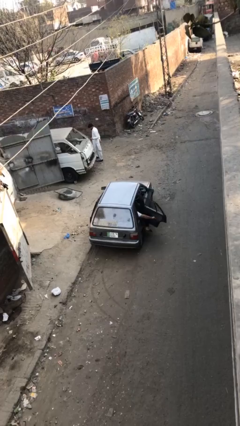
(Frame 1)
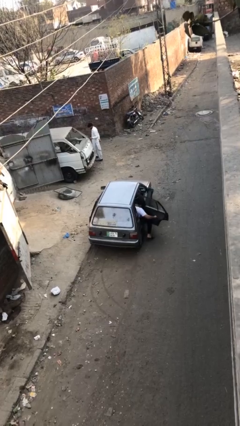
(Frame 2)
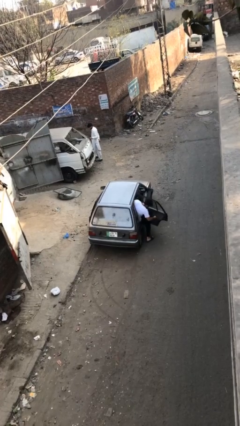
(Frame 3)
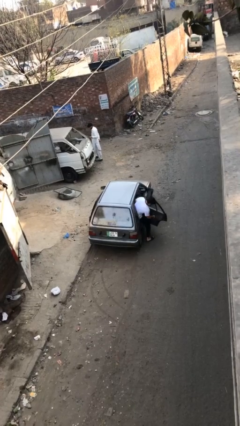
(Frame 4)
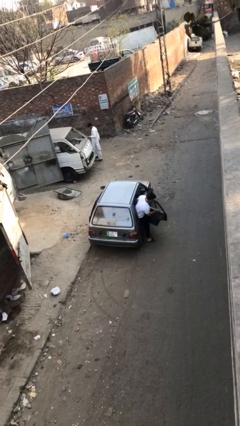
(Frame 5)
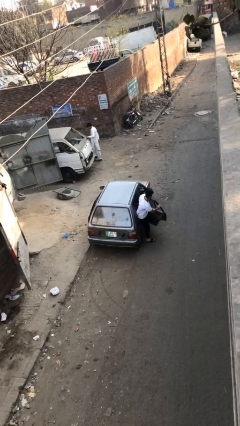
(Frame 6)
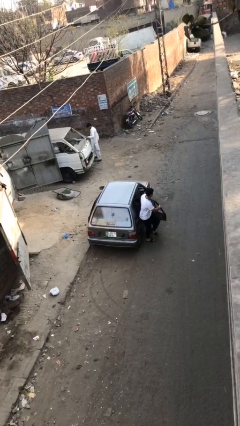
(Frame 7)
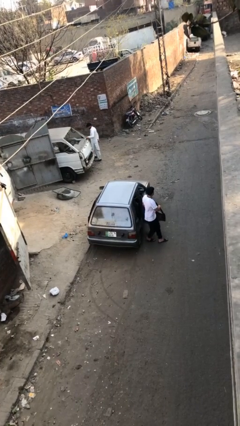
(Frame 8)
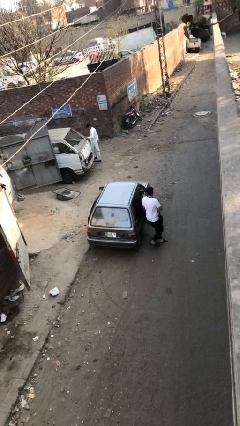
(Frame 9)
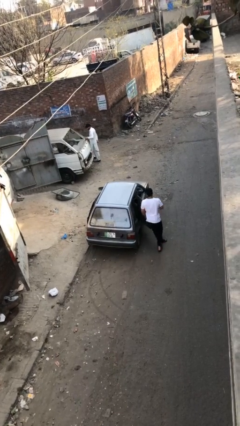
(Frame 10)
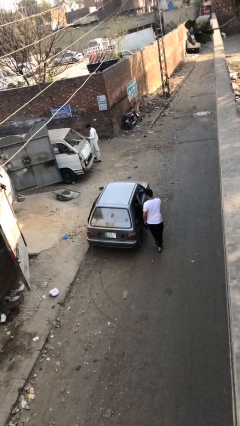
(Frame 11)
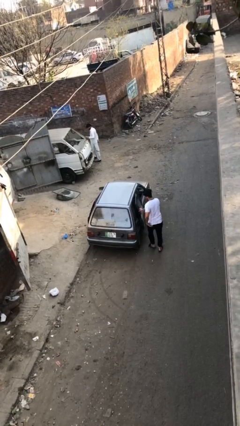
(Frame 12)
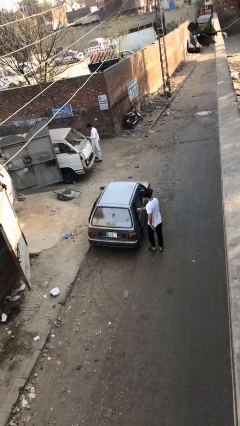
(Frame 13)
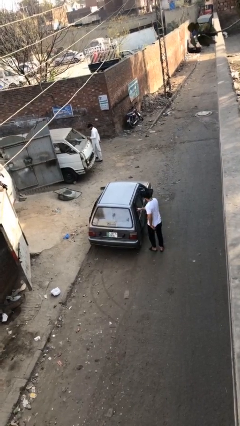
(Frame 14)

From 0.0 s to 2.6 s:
car drops off person

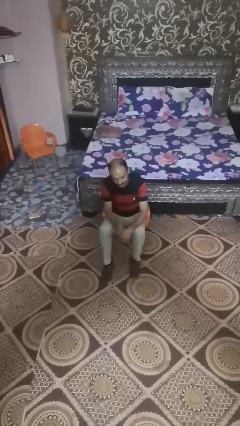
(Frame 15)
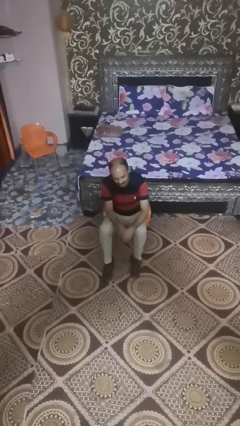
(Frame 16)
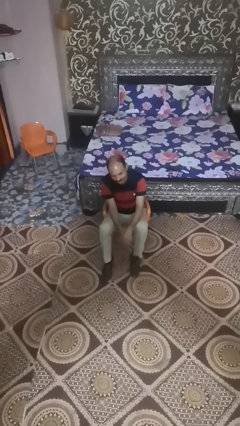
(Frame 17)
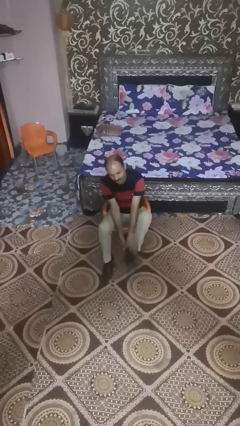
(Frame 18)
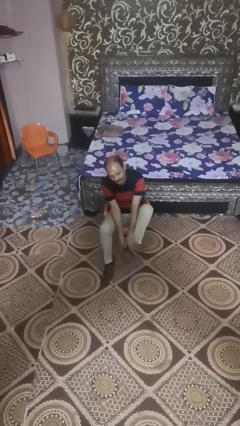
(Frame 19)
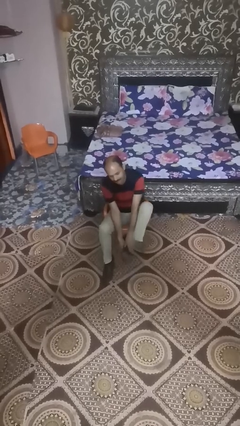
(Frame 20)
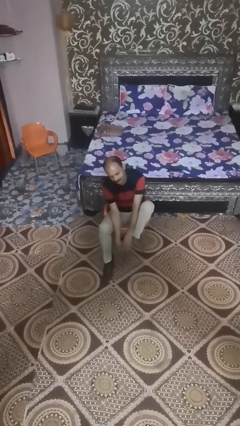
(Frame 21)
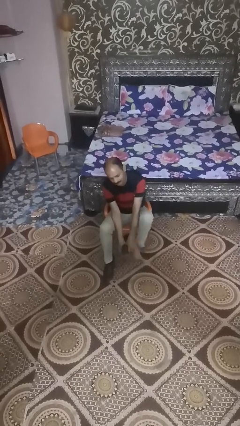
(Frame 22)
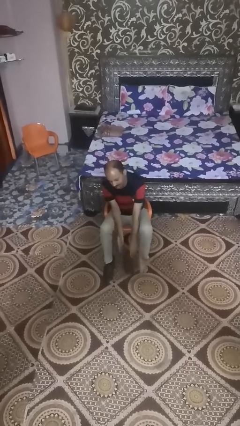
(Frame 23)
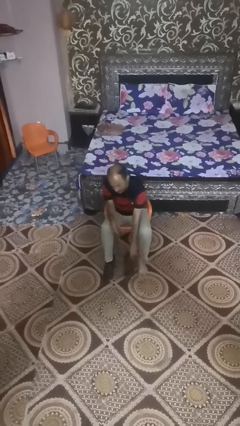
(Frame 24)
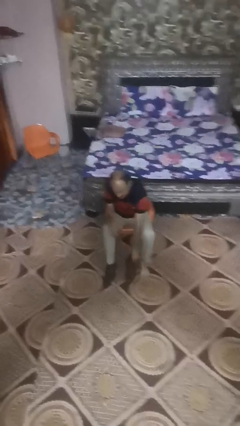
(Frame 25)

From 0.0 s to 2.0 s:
person takes off boots

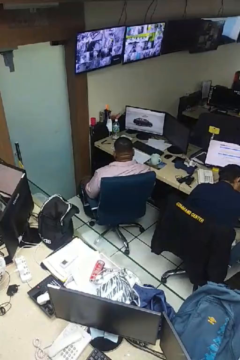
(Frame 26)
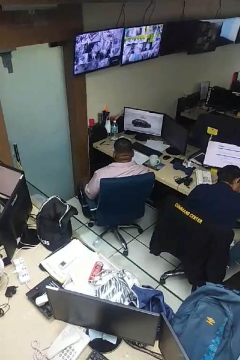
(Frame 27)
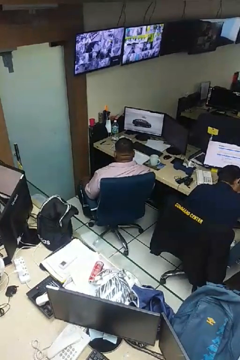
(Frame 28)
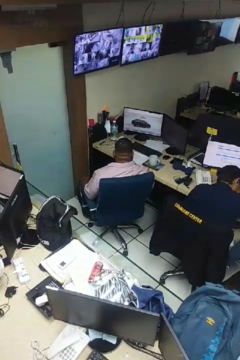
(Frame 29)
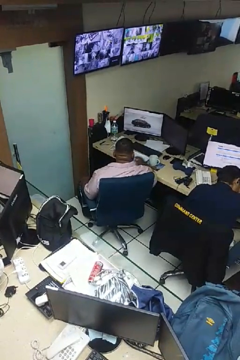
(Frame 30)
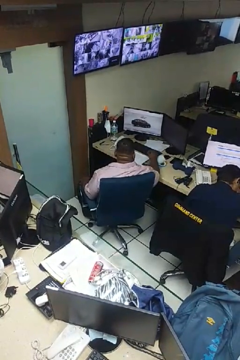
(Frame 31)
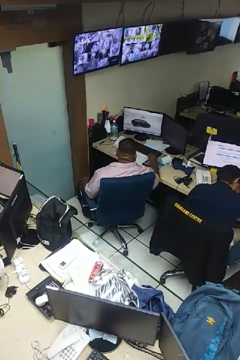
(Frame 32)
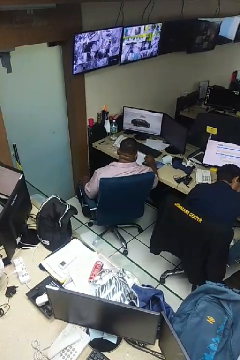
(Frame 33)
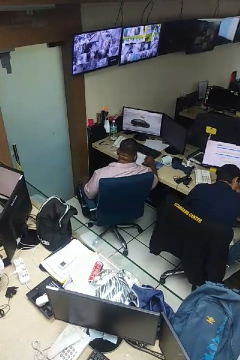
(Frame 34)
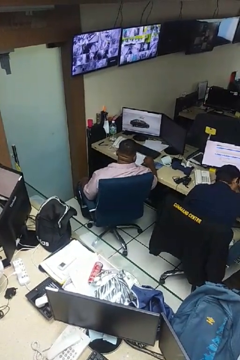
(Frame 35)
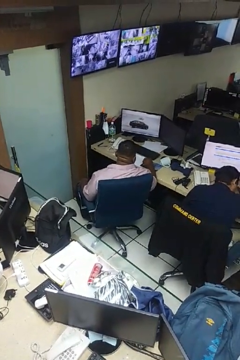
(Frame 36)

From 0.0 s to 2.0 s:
person knocks over glass

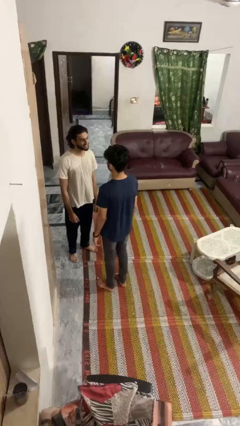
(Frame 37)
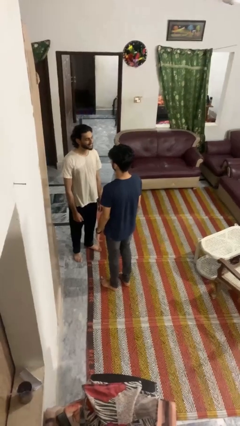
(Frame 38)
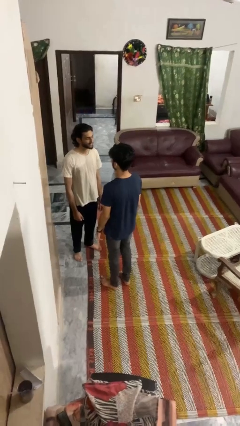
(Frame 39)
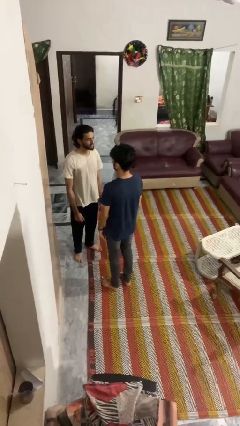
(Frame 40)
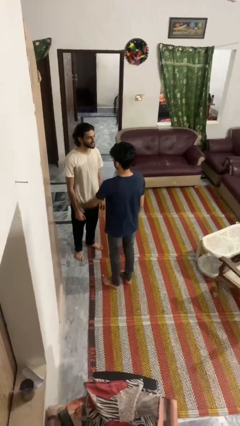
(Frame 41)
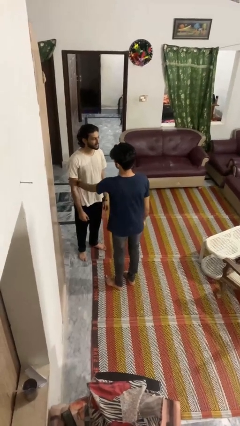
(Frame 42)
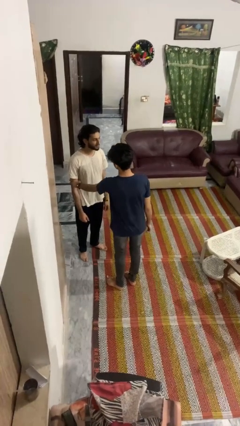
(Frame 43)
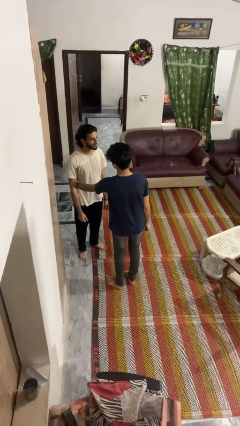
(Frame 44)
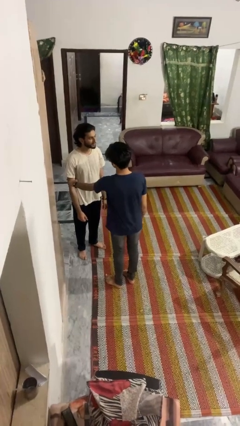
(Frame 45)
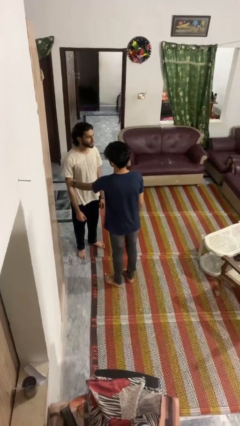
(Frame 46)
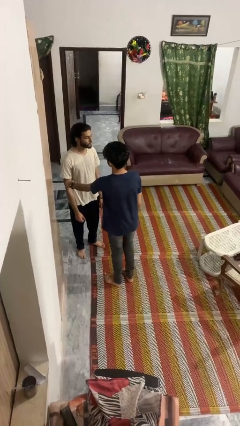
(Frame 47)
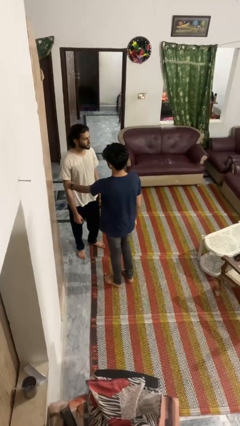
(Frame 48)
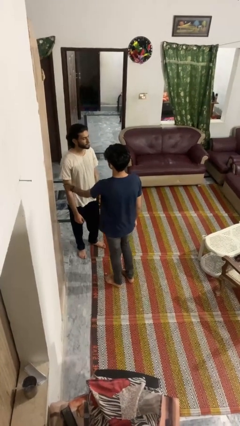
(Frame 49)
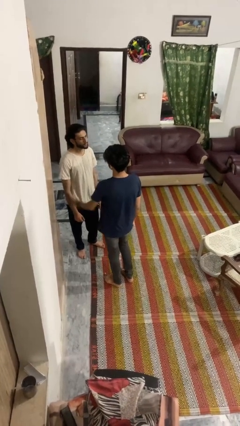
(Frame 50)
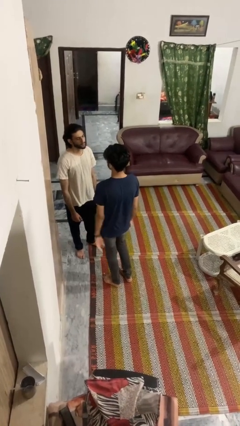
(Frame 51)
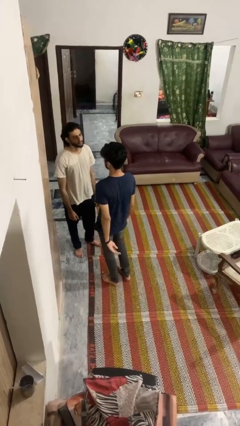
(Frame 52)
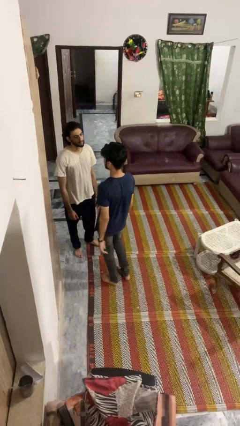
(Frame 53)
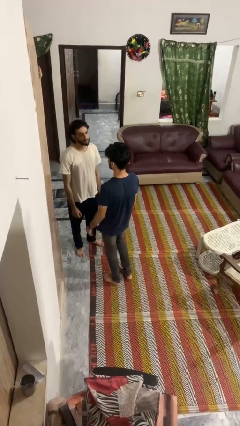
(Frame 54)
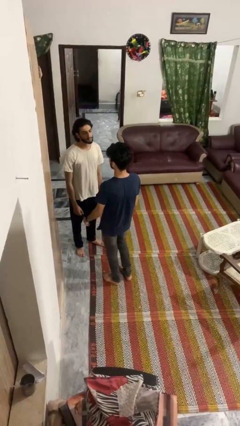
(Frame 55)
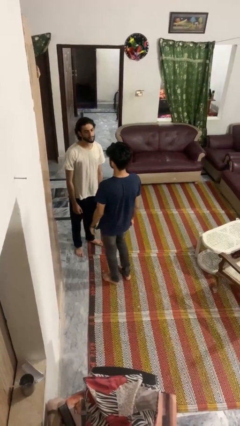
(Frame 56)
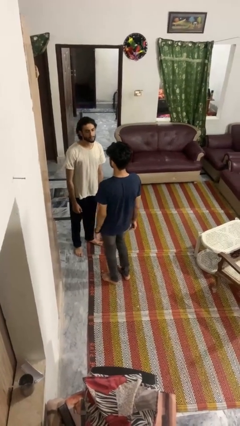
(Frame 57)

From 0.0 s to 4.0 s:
person grabs person by bicep

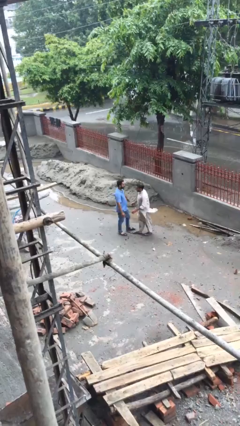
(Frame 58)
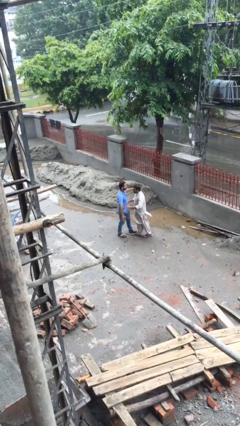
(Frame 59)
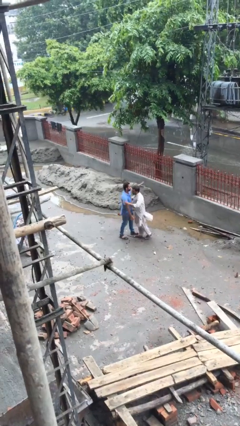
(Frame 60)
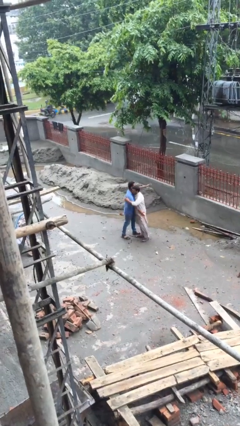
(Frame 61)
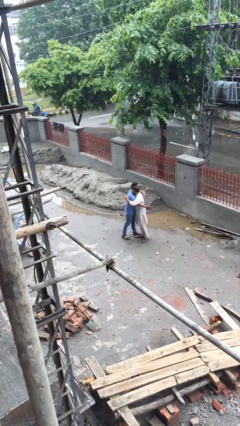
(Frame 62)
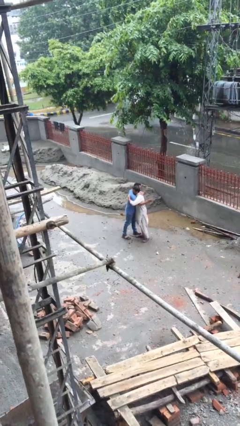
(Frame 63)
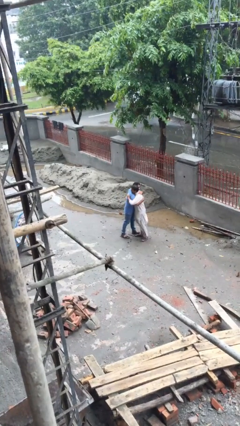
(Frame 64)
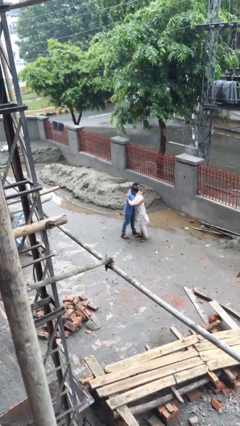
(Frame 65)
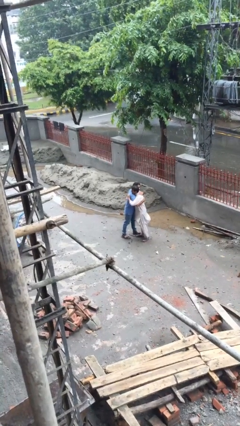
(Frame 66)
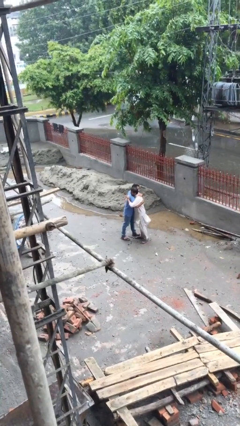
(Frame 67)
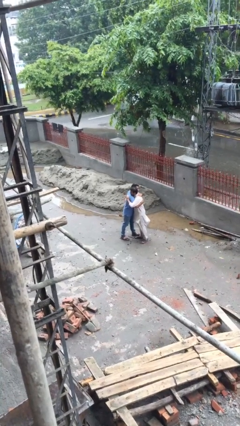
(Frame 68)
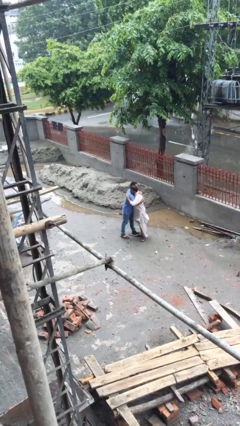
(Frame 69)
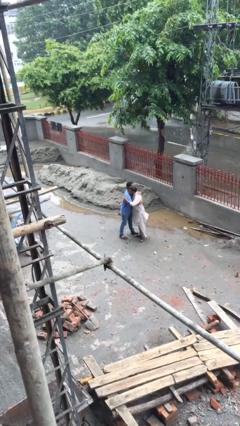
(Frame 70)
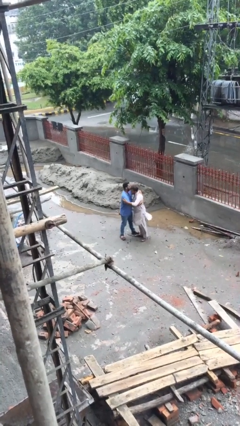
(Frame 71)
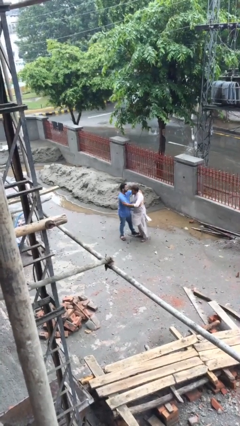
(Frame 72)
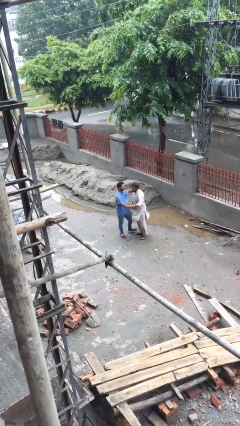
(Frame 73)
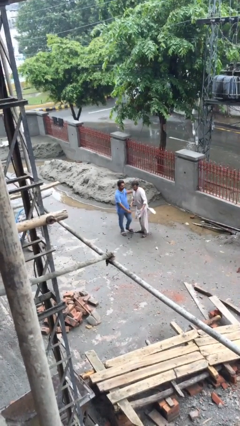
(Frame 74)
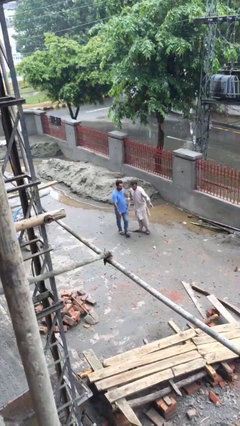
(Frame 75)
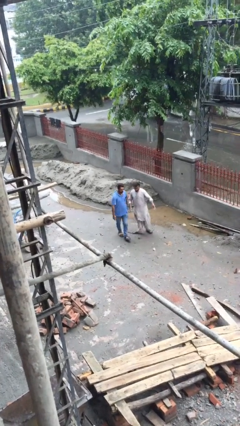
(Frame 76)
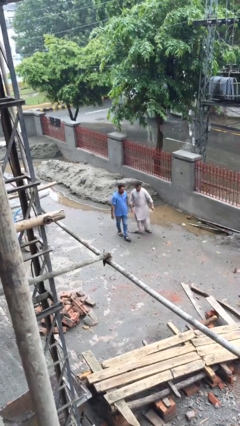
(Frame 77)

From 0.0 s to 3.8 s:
person embraces person

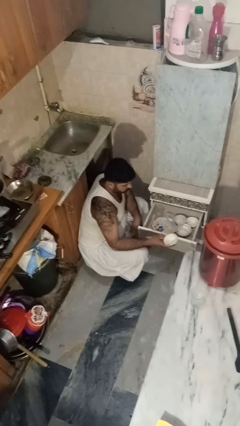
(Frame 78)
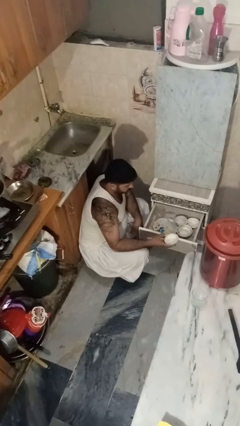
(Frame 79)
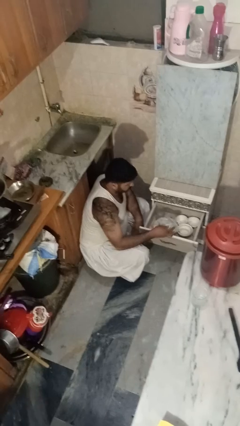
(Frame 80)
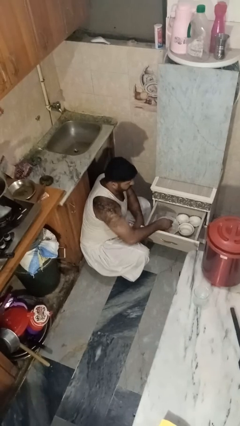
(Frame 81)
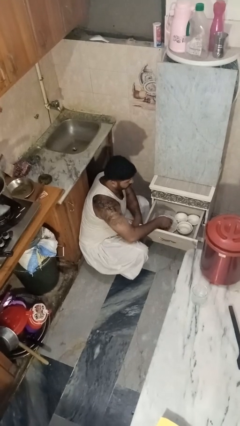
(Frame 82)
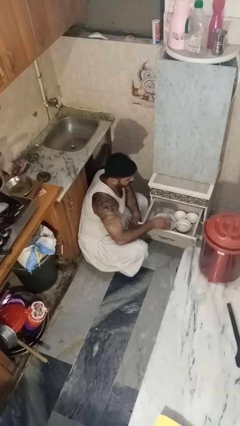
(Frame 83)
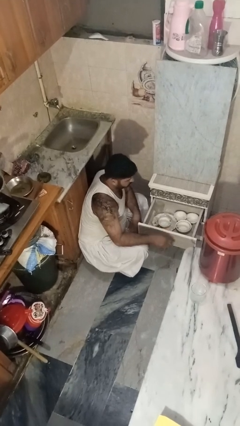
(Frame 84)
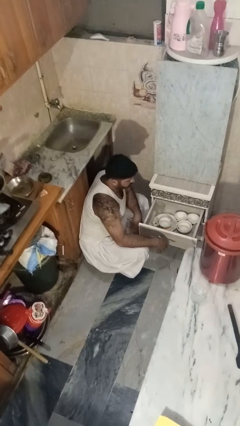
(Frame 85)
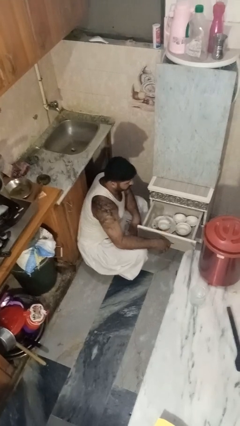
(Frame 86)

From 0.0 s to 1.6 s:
person puts object into kitchen drawer

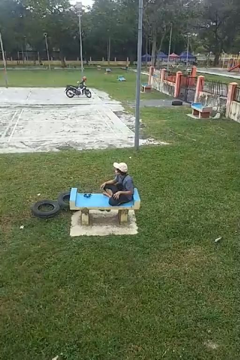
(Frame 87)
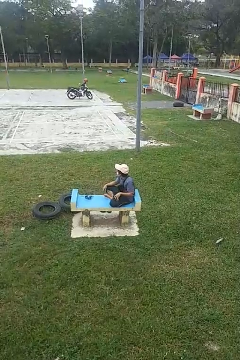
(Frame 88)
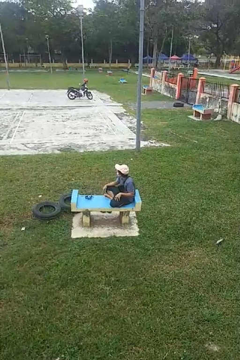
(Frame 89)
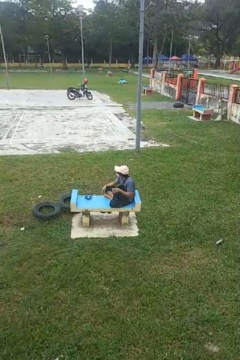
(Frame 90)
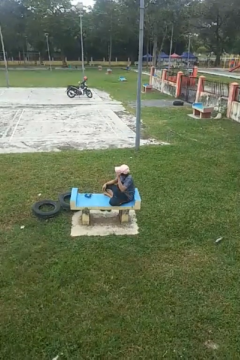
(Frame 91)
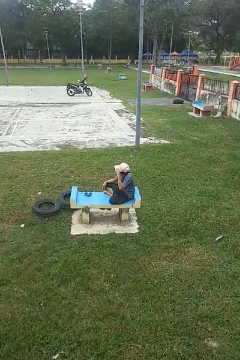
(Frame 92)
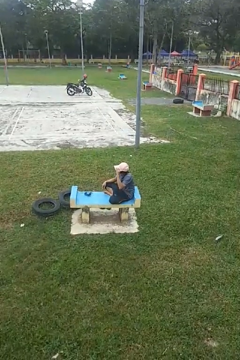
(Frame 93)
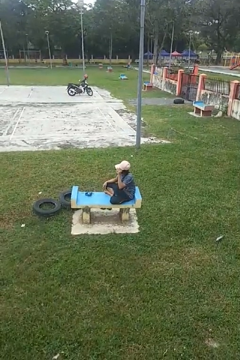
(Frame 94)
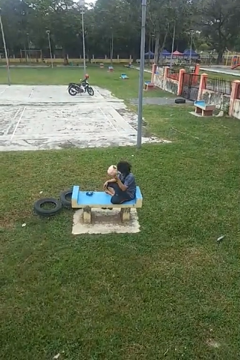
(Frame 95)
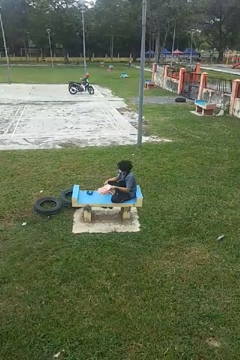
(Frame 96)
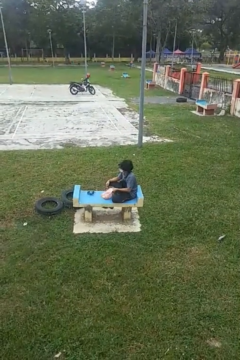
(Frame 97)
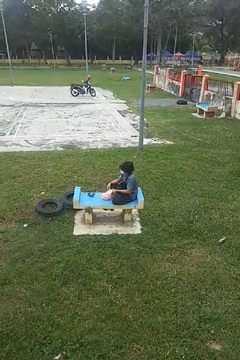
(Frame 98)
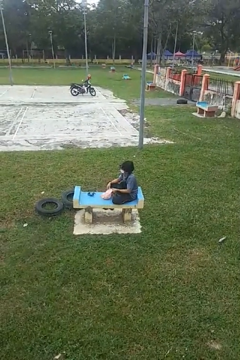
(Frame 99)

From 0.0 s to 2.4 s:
person takes off hat
